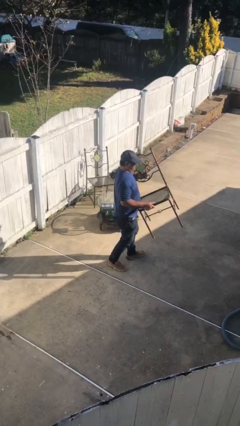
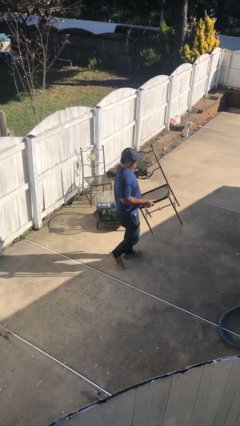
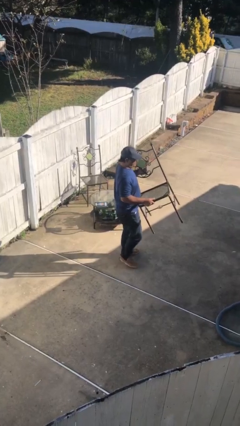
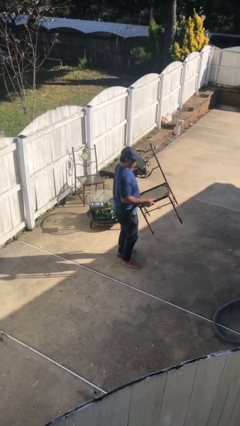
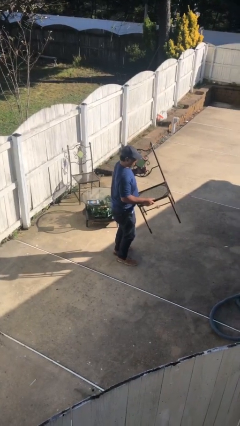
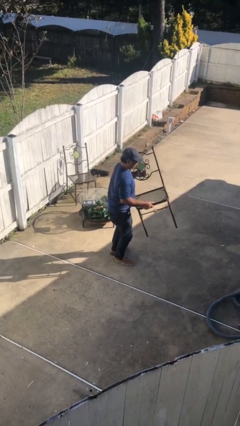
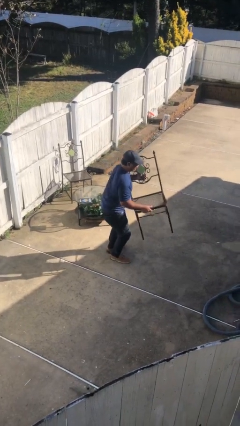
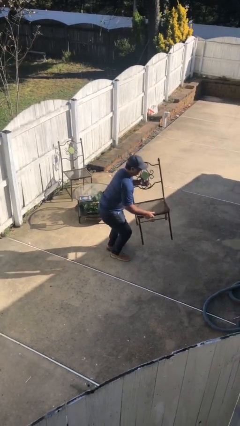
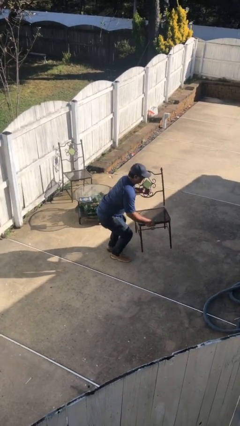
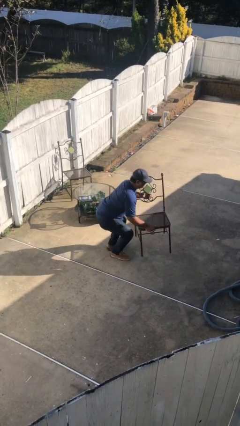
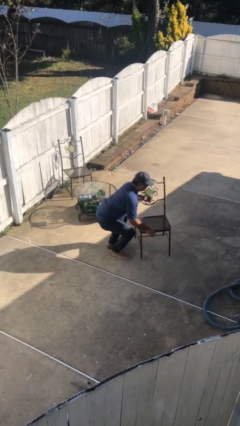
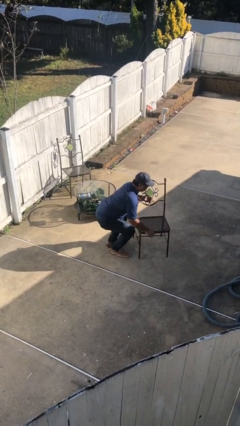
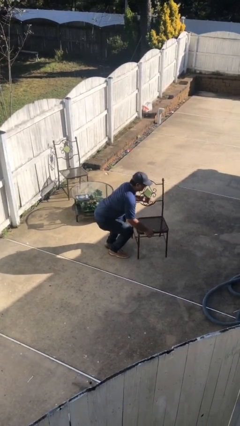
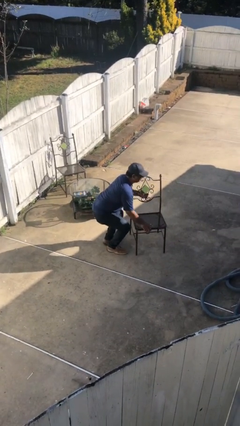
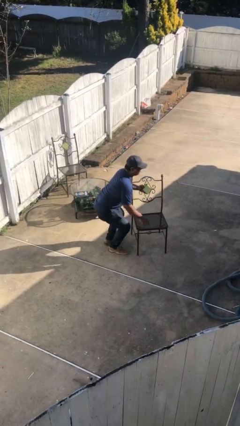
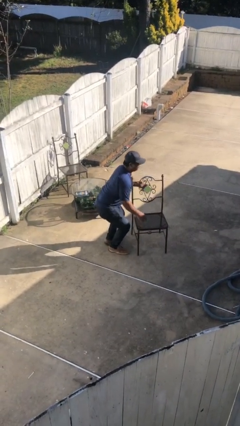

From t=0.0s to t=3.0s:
person puts down object on floor

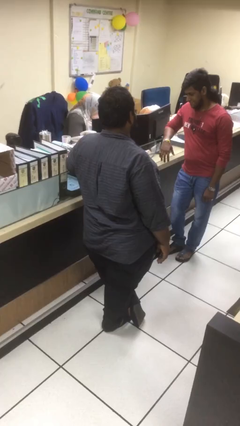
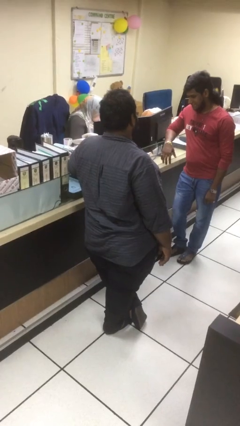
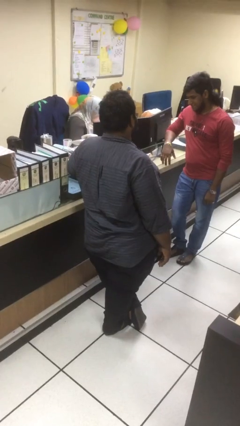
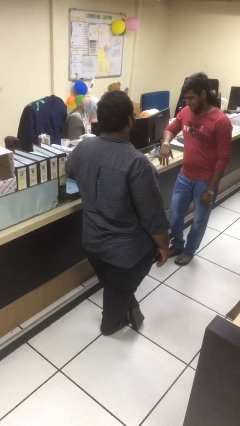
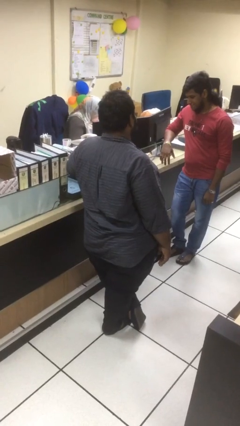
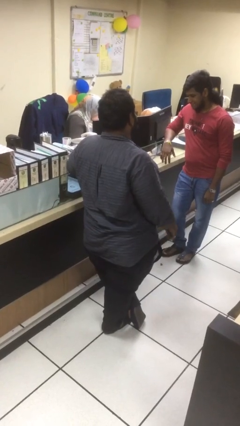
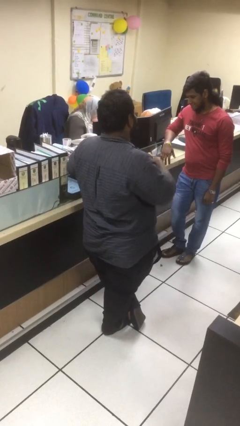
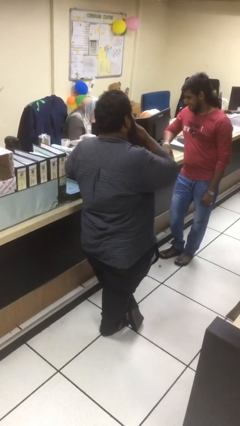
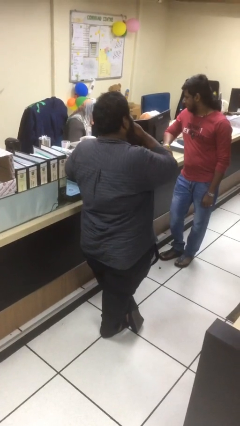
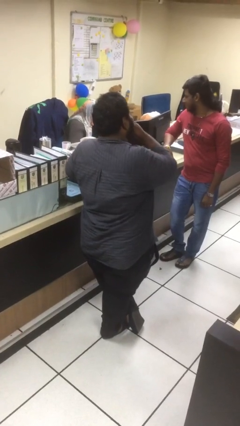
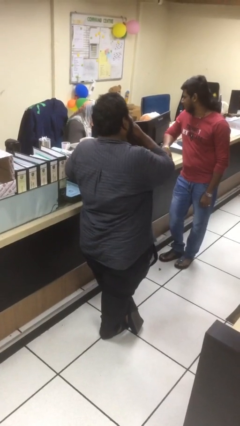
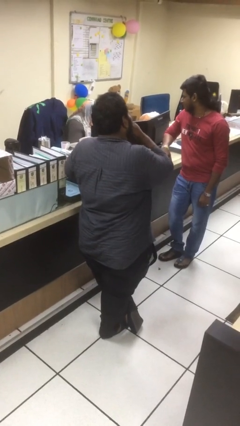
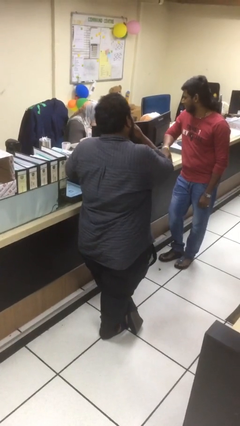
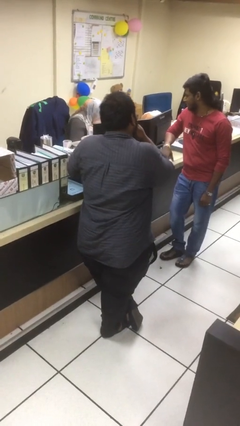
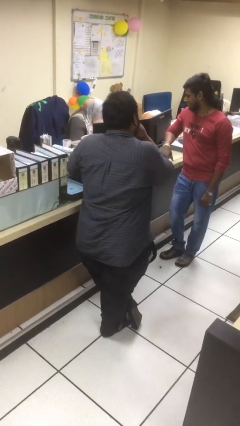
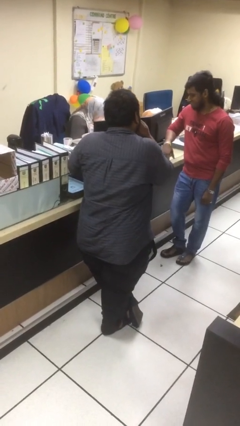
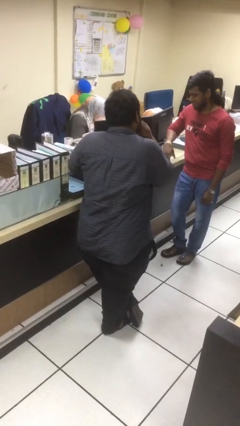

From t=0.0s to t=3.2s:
person laughs with person

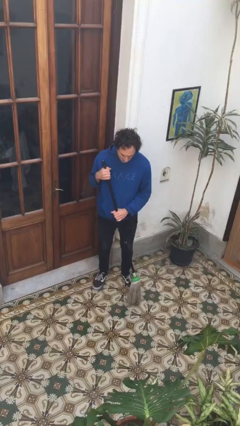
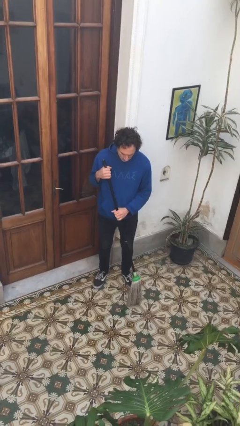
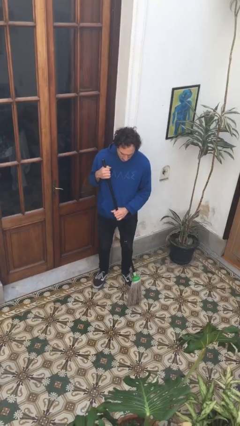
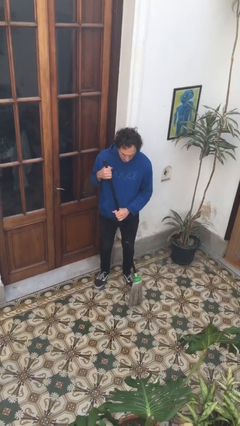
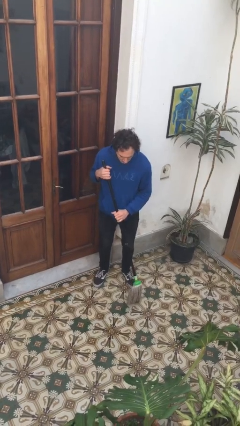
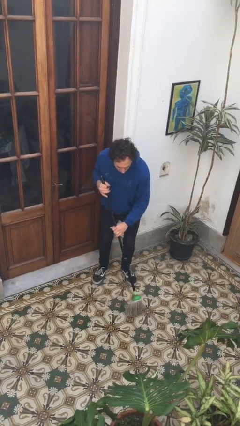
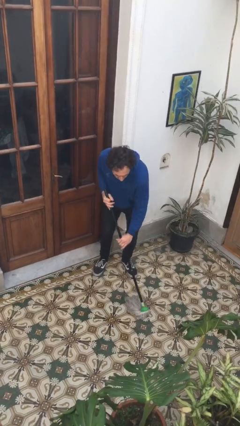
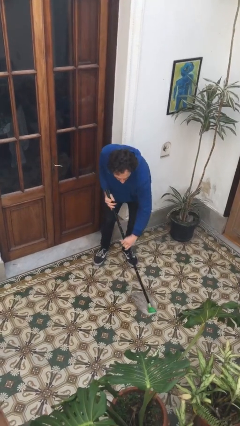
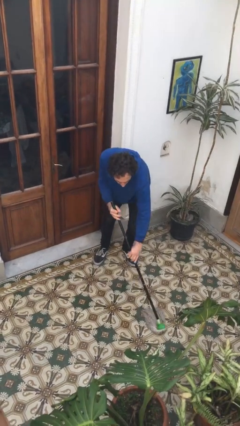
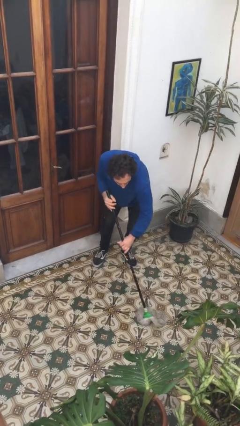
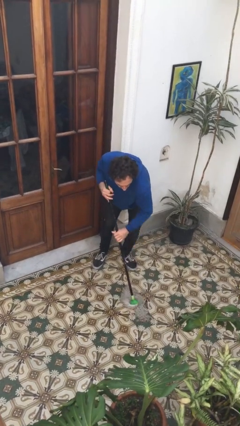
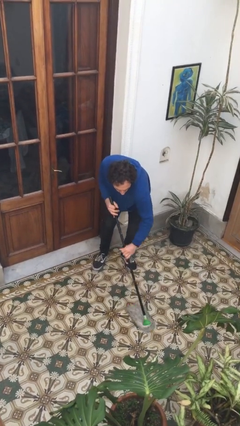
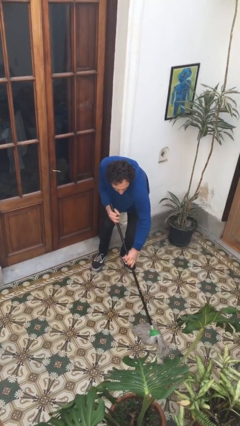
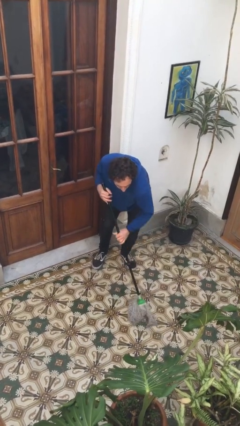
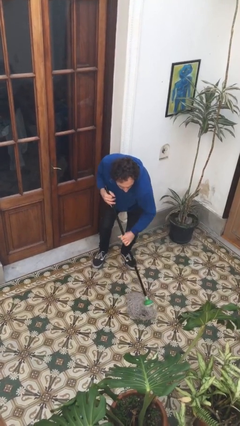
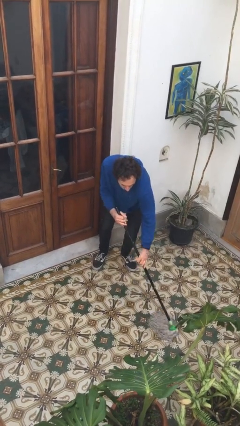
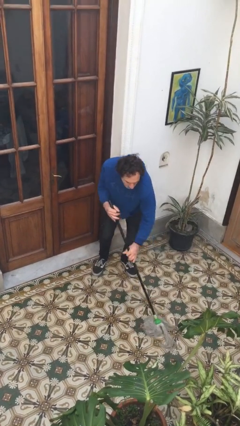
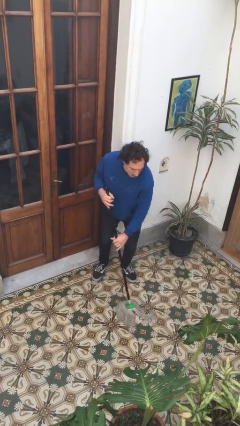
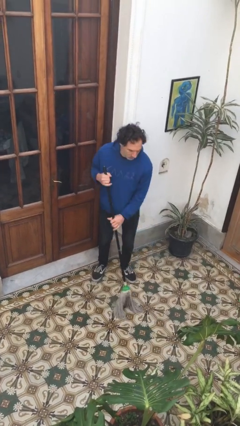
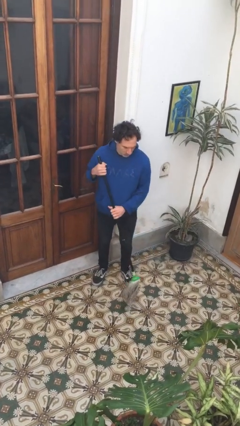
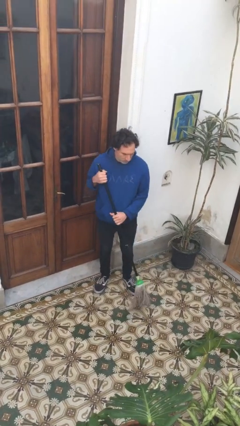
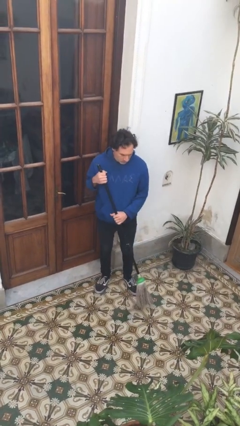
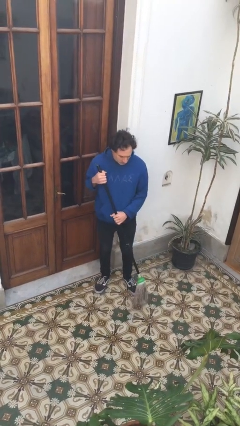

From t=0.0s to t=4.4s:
person mops

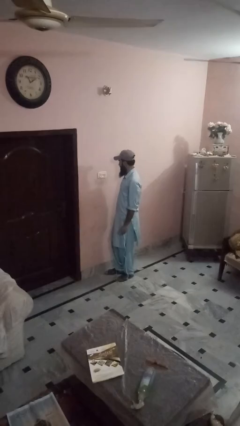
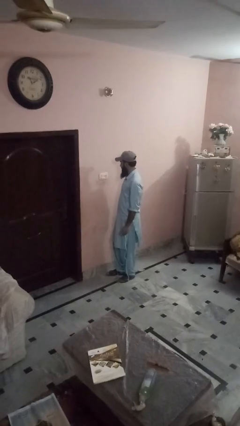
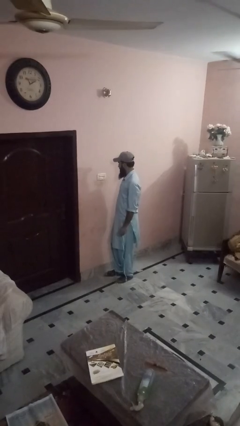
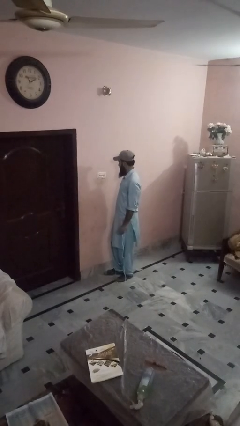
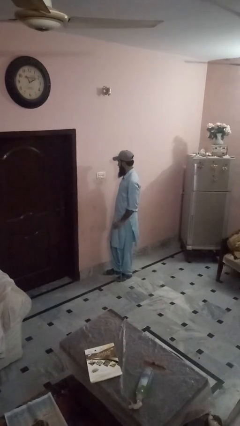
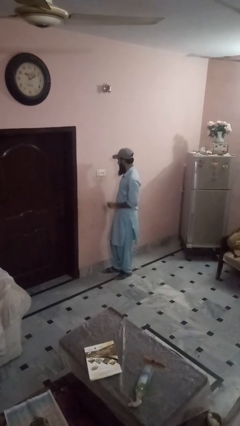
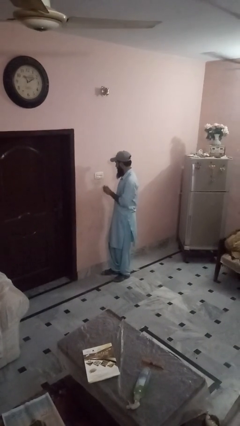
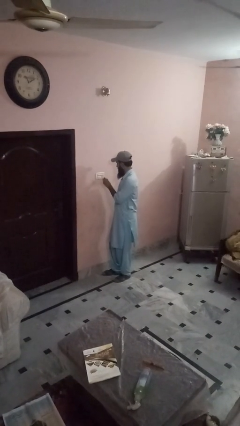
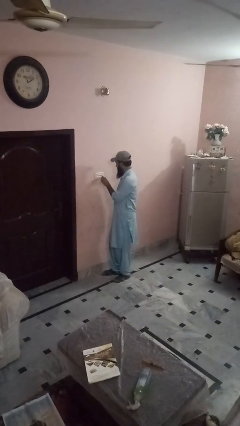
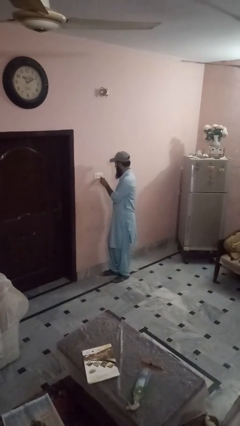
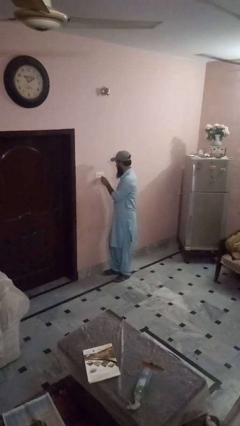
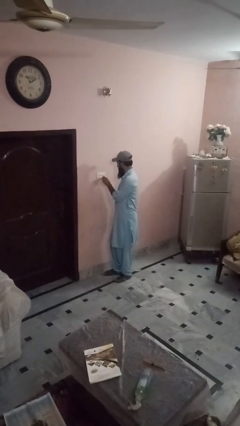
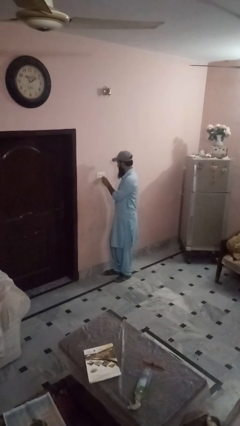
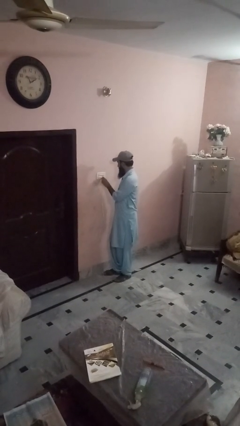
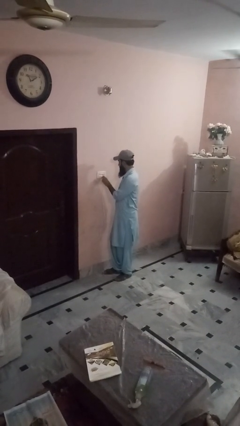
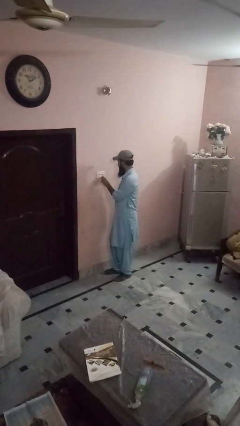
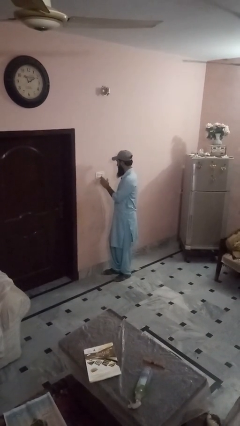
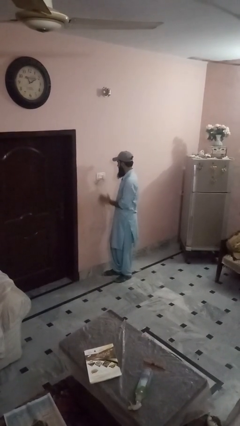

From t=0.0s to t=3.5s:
person plugs into electrical socket

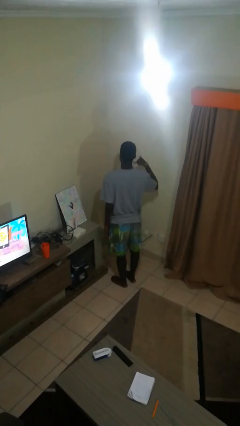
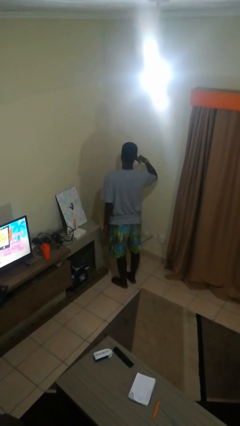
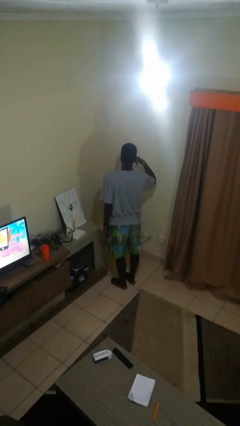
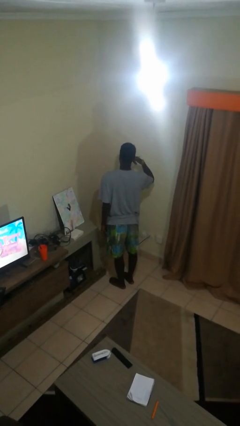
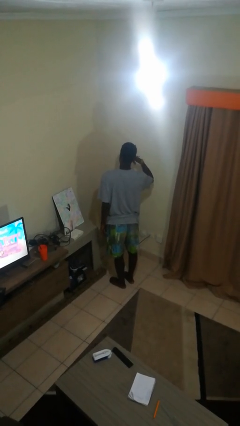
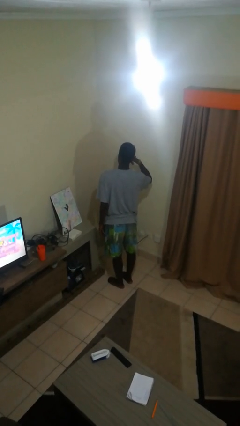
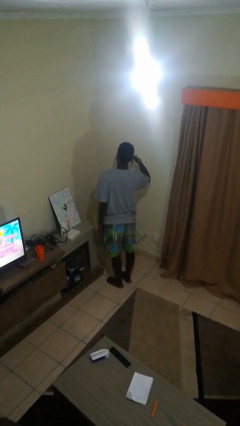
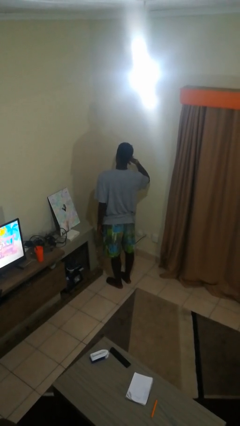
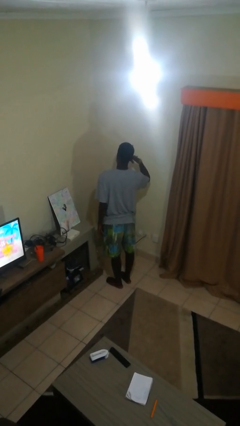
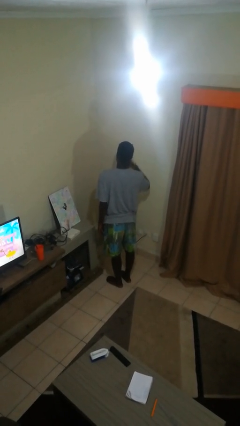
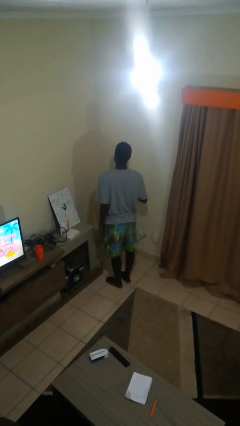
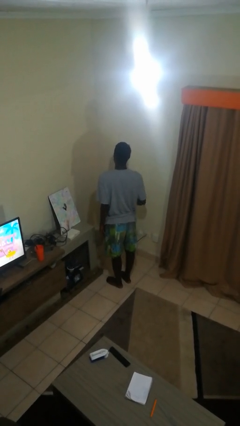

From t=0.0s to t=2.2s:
person gestures call me

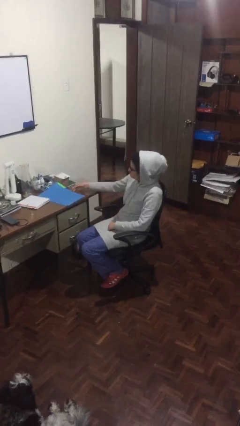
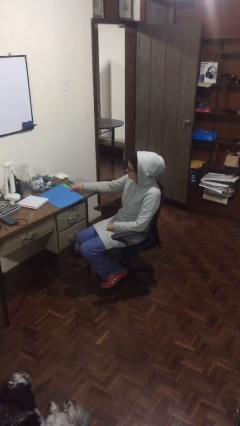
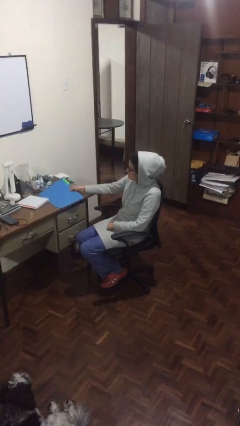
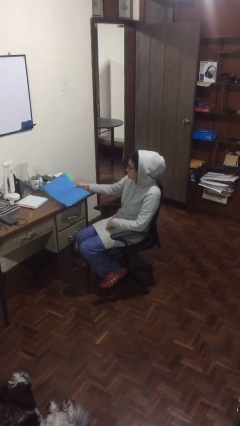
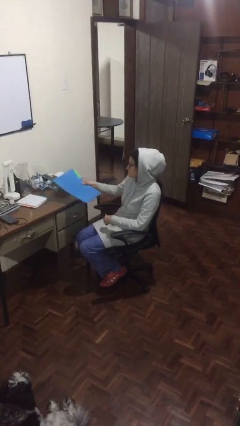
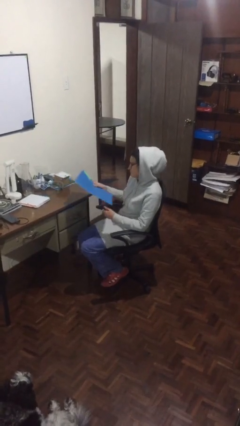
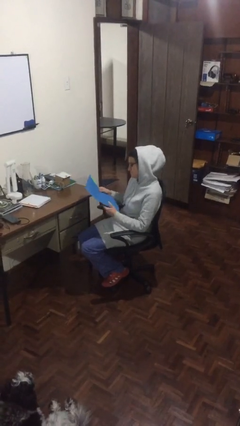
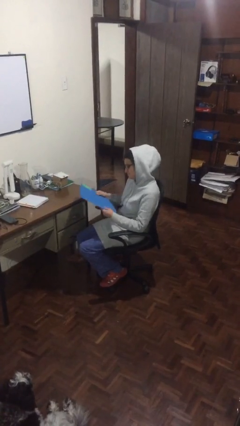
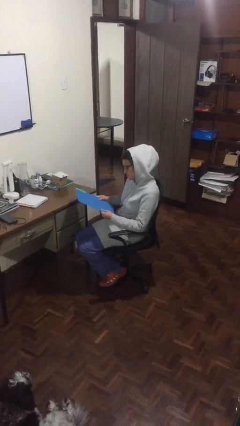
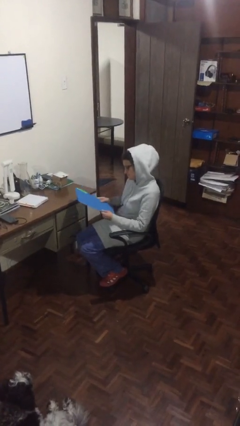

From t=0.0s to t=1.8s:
person picks up object from table
